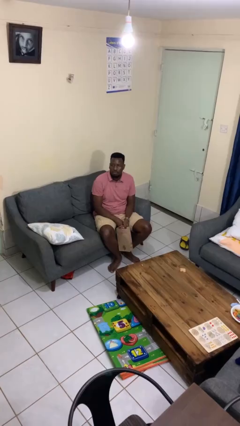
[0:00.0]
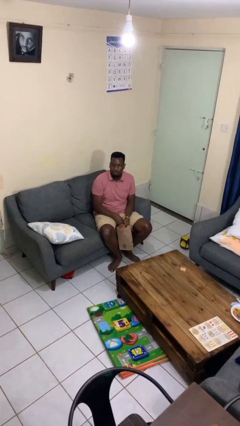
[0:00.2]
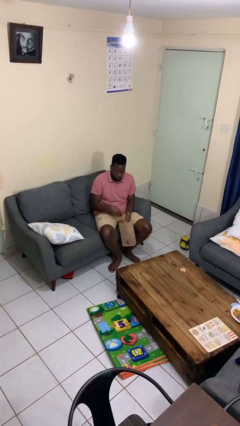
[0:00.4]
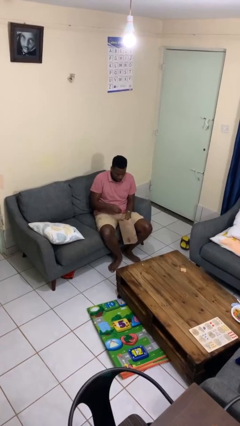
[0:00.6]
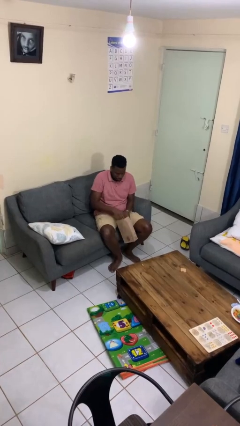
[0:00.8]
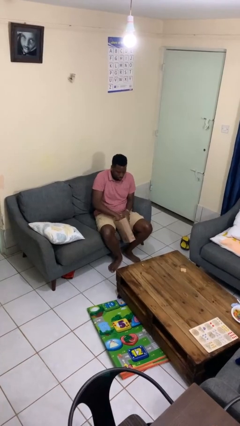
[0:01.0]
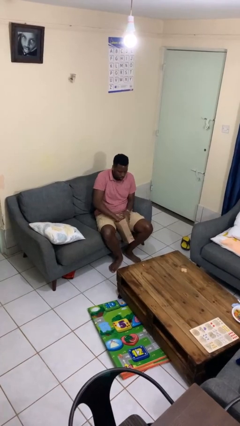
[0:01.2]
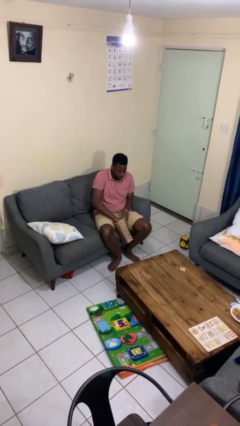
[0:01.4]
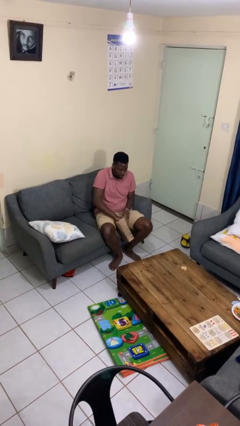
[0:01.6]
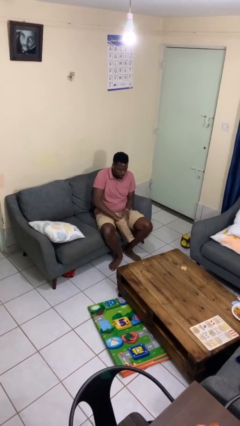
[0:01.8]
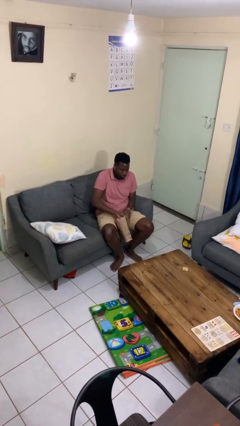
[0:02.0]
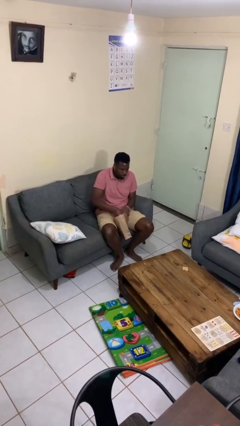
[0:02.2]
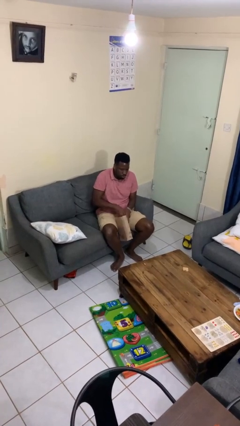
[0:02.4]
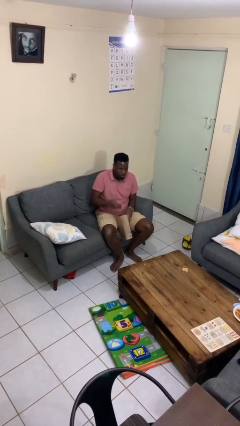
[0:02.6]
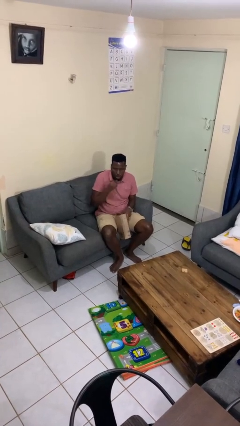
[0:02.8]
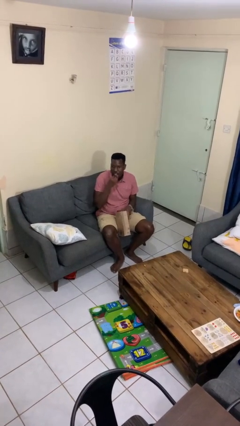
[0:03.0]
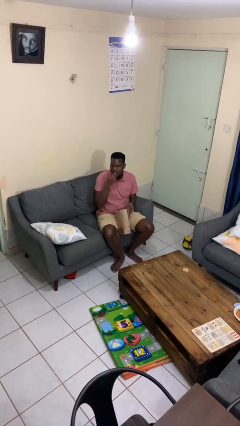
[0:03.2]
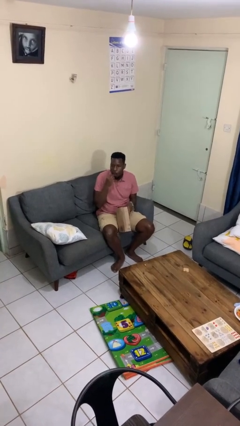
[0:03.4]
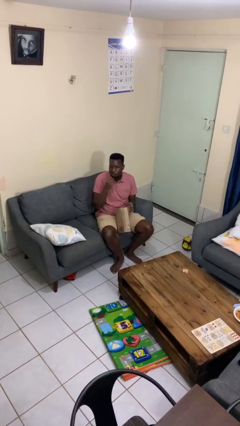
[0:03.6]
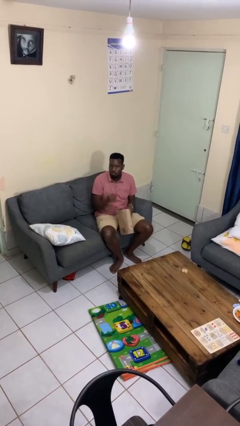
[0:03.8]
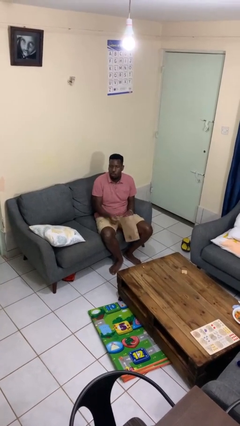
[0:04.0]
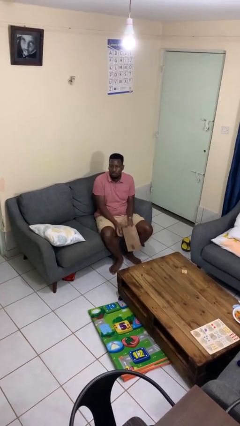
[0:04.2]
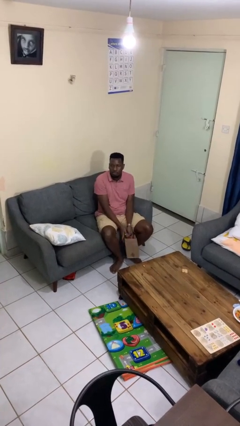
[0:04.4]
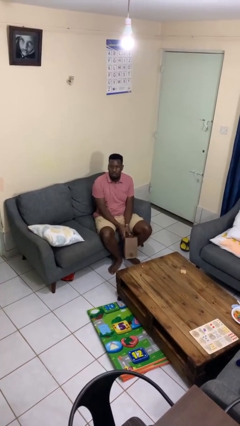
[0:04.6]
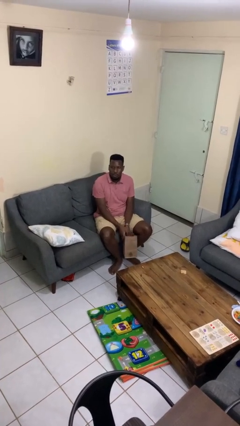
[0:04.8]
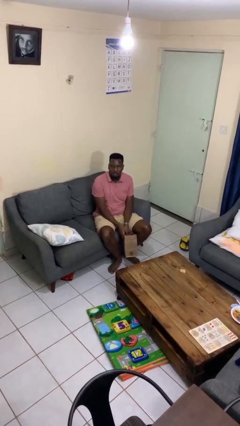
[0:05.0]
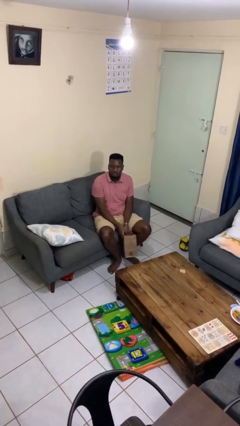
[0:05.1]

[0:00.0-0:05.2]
person eats snack from bag

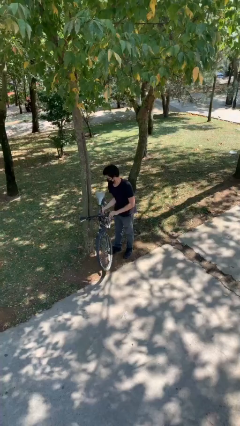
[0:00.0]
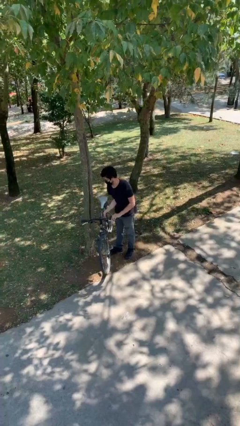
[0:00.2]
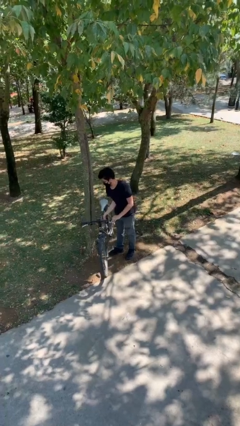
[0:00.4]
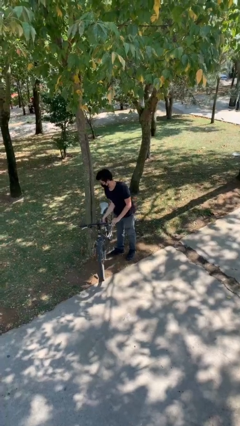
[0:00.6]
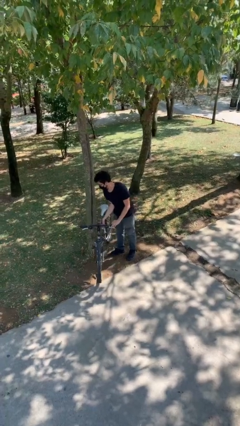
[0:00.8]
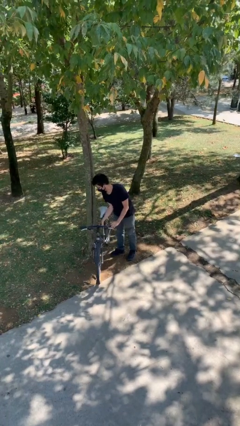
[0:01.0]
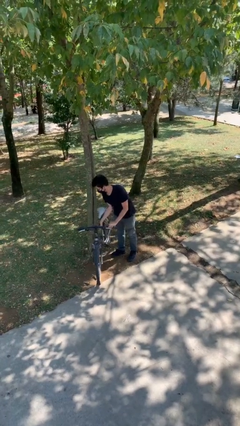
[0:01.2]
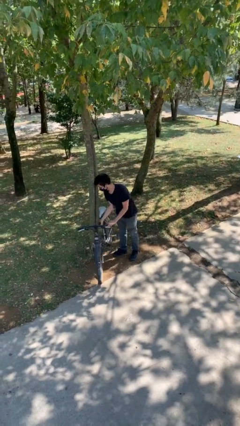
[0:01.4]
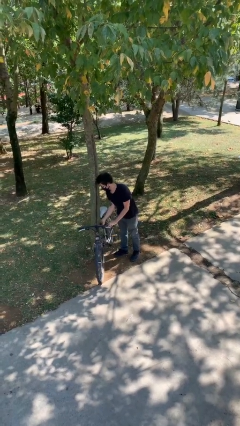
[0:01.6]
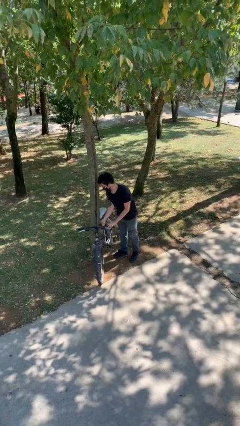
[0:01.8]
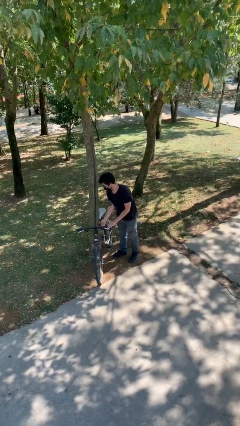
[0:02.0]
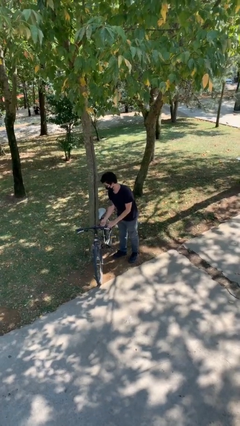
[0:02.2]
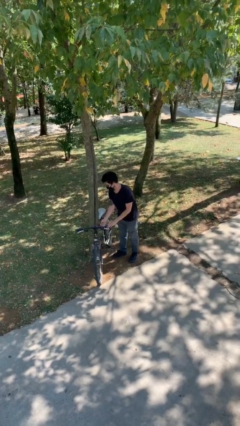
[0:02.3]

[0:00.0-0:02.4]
person puts down object on floor

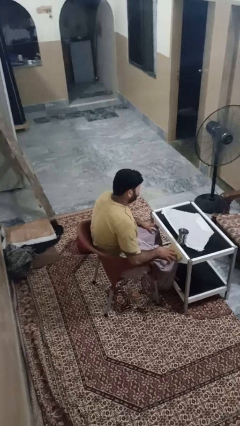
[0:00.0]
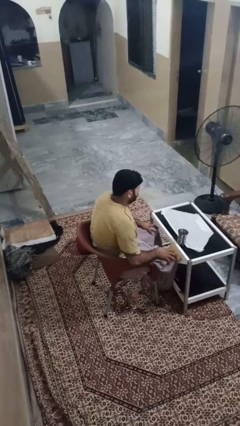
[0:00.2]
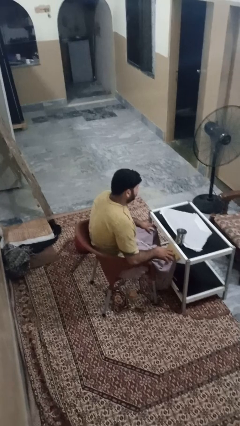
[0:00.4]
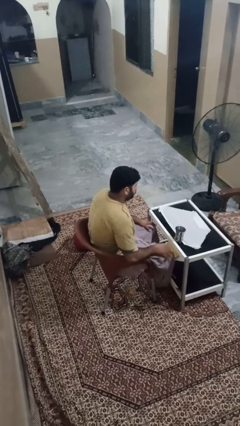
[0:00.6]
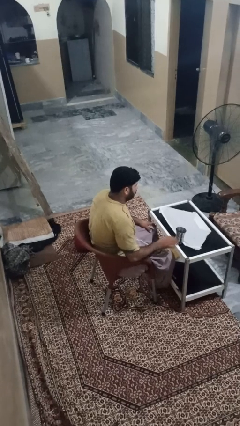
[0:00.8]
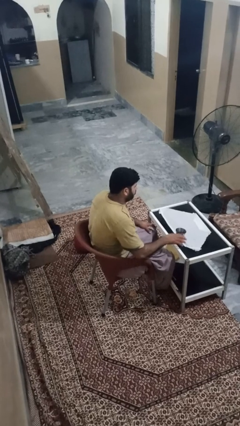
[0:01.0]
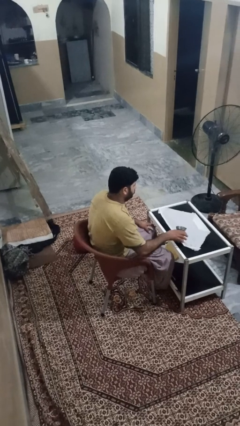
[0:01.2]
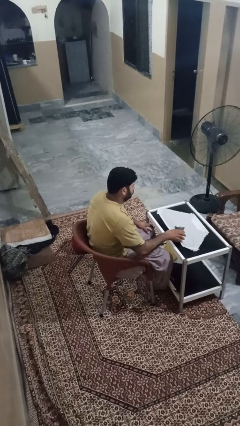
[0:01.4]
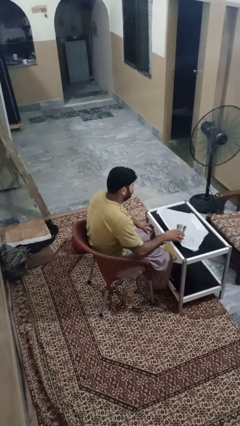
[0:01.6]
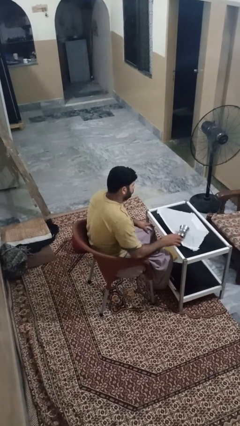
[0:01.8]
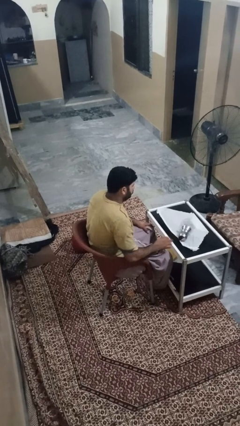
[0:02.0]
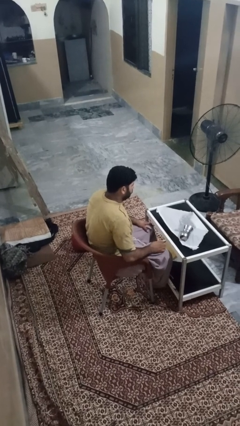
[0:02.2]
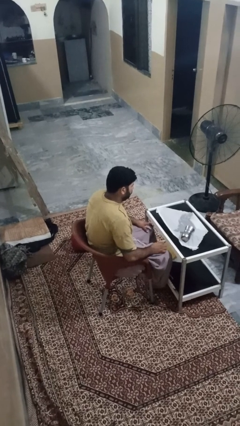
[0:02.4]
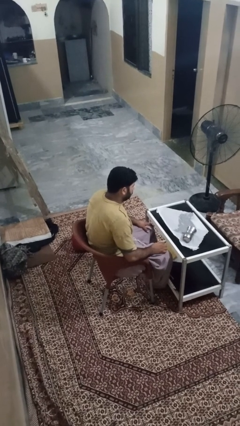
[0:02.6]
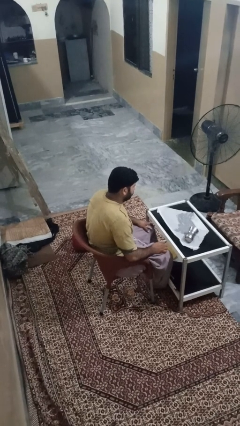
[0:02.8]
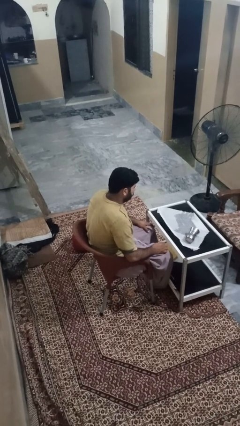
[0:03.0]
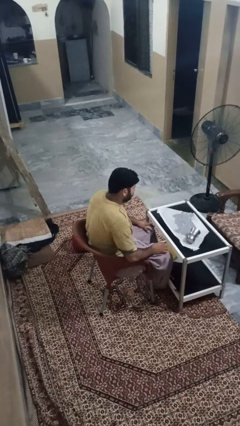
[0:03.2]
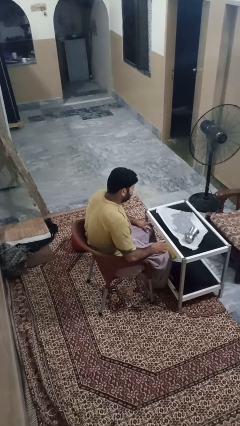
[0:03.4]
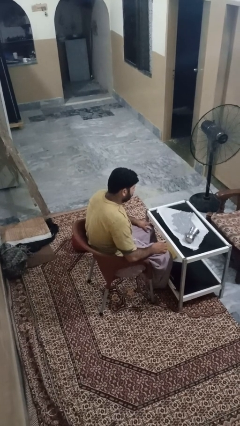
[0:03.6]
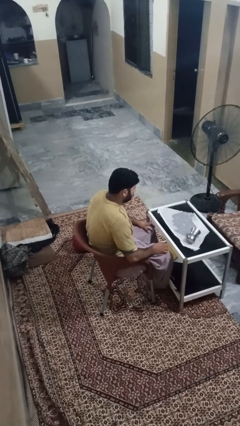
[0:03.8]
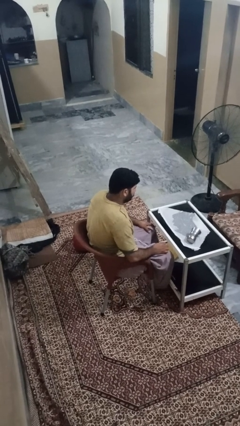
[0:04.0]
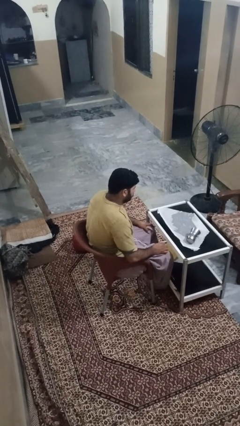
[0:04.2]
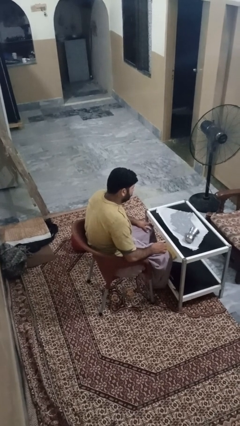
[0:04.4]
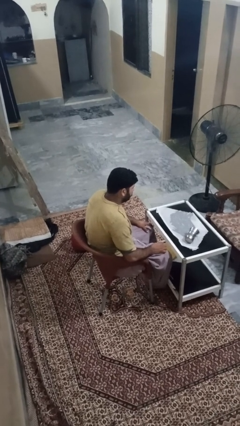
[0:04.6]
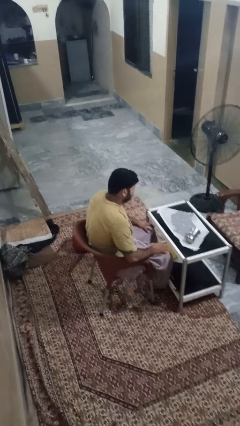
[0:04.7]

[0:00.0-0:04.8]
person spills on table

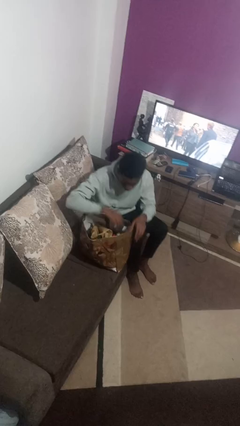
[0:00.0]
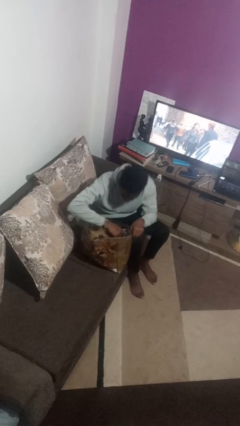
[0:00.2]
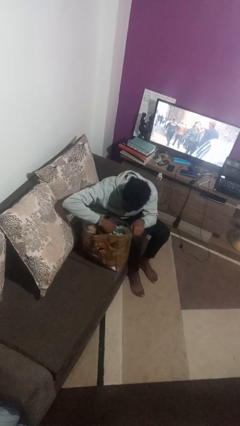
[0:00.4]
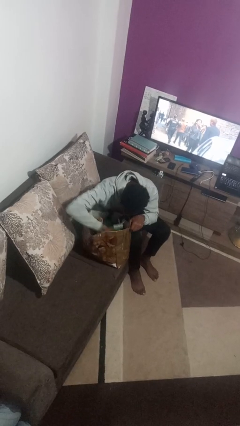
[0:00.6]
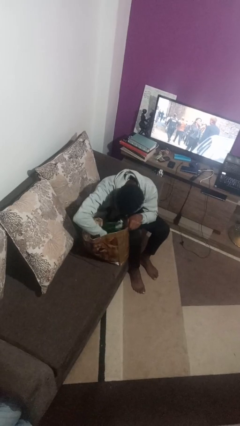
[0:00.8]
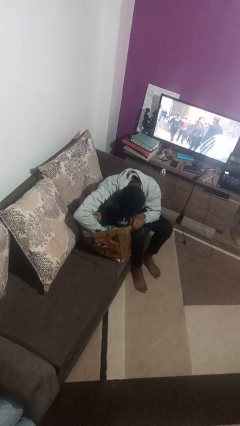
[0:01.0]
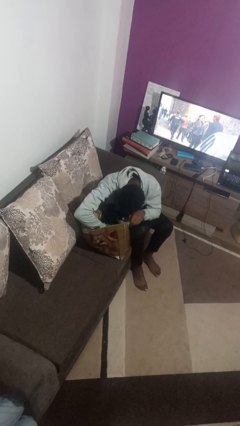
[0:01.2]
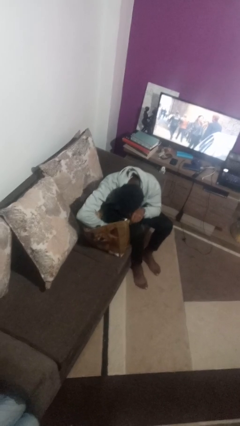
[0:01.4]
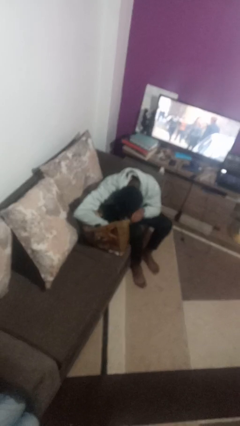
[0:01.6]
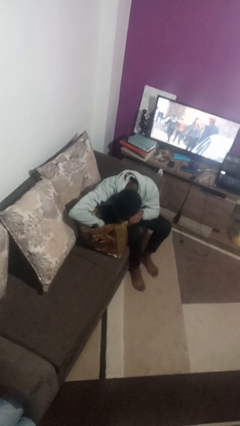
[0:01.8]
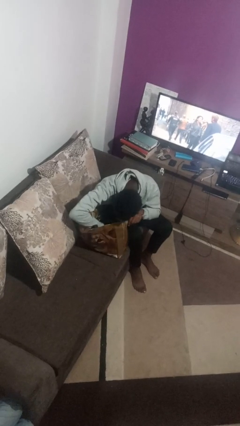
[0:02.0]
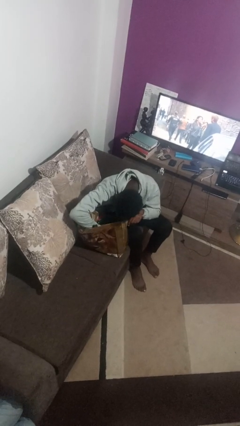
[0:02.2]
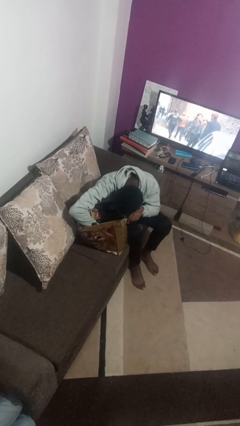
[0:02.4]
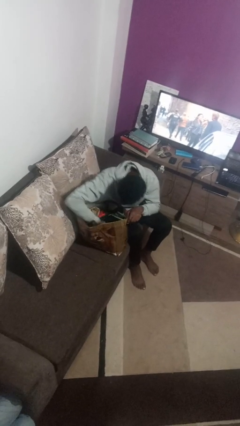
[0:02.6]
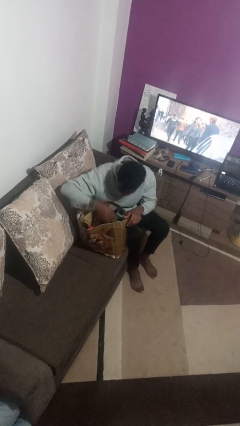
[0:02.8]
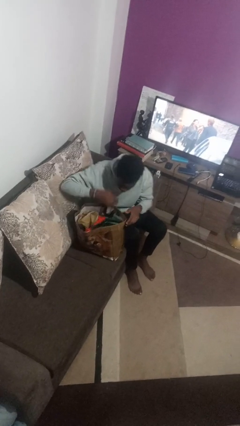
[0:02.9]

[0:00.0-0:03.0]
person searches in bag

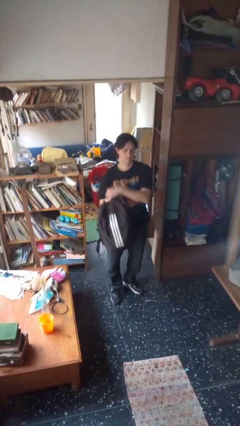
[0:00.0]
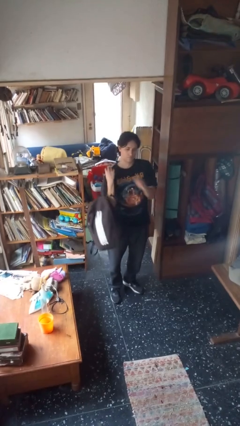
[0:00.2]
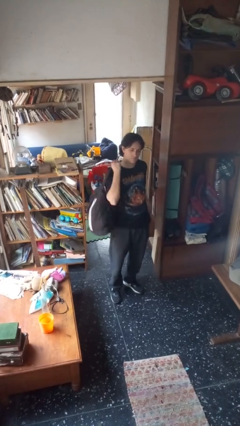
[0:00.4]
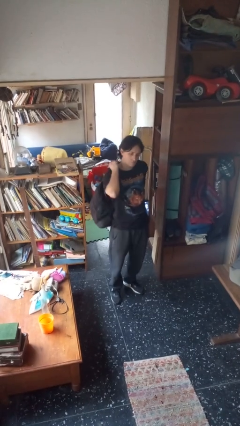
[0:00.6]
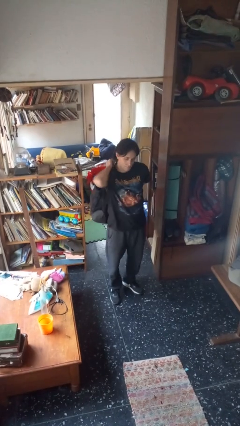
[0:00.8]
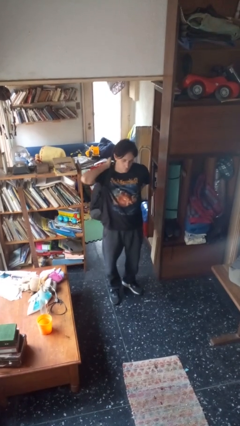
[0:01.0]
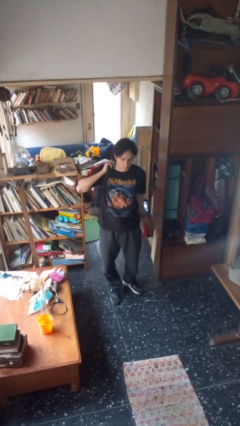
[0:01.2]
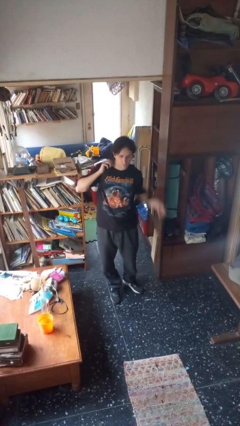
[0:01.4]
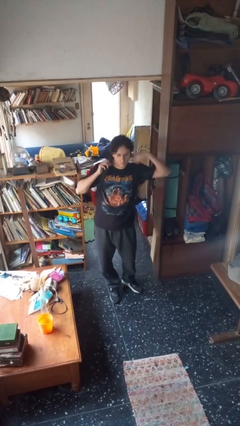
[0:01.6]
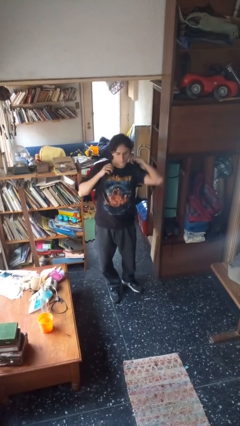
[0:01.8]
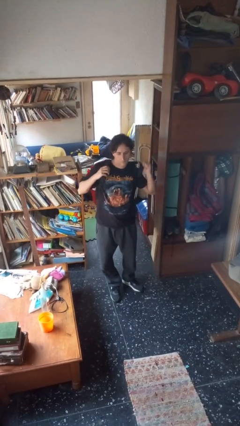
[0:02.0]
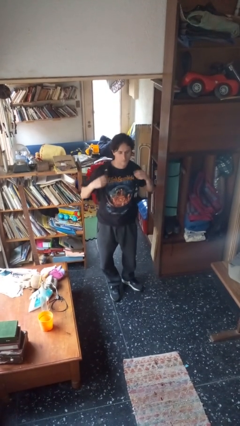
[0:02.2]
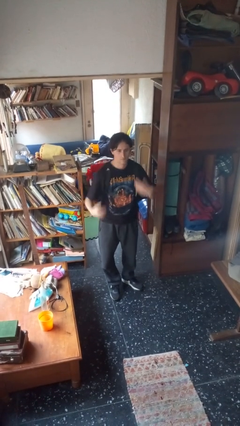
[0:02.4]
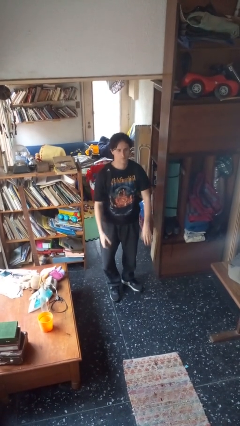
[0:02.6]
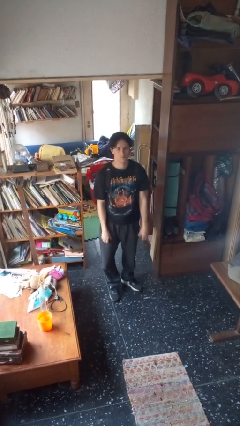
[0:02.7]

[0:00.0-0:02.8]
person puts on backpack
